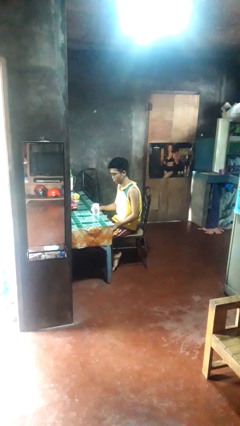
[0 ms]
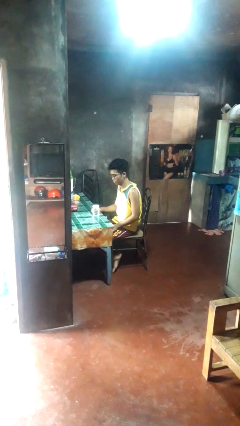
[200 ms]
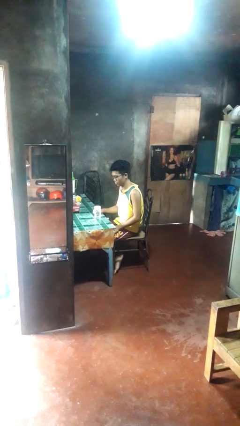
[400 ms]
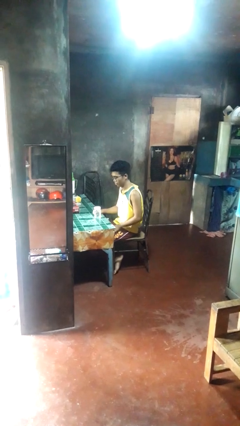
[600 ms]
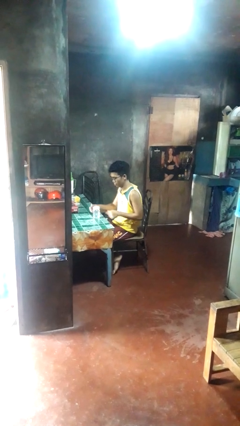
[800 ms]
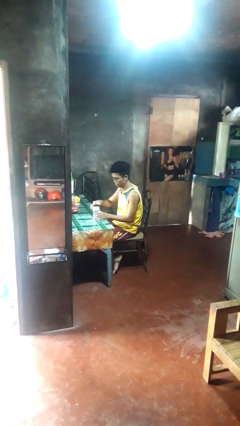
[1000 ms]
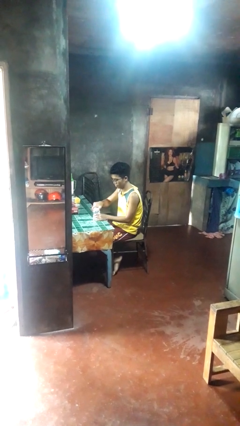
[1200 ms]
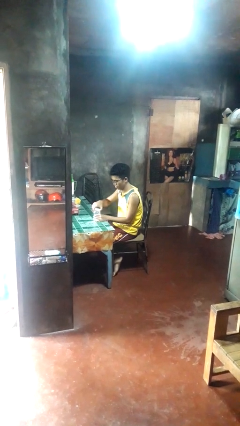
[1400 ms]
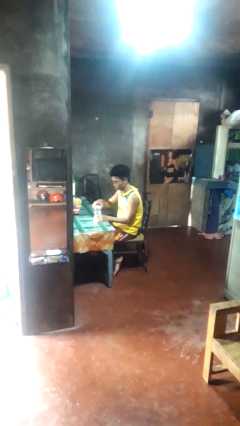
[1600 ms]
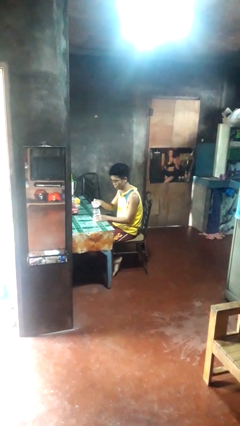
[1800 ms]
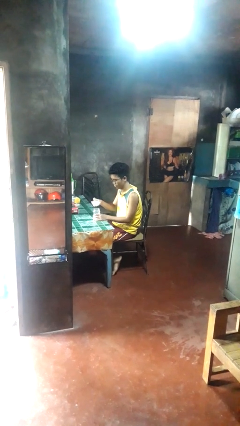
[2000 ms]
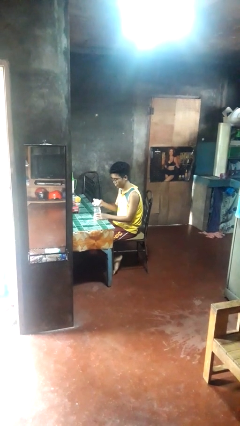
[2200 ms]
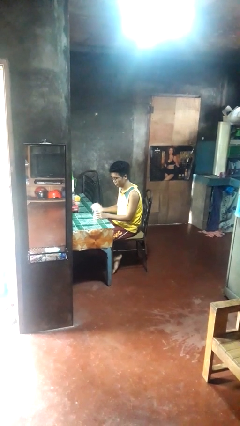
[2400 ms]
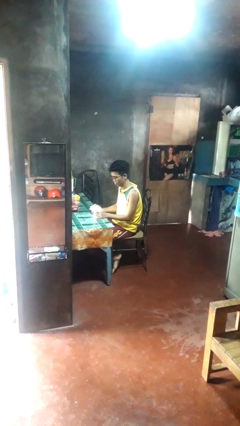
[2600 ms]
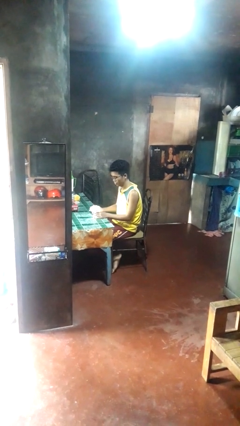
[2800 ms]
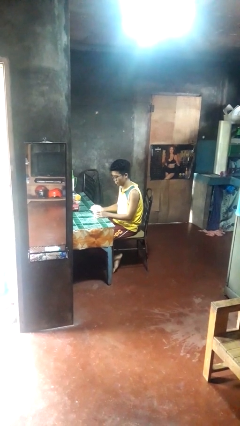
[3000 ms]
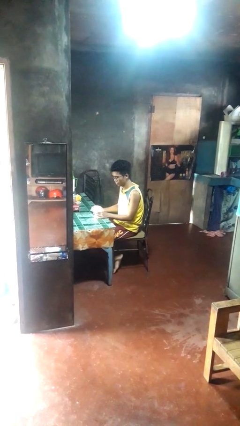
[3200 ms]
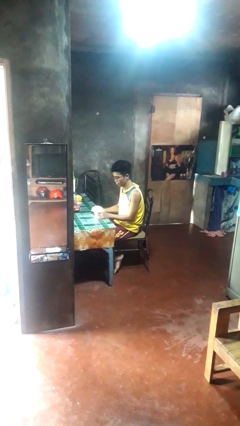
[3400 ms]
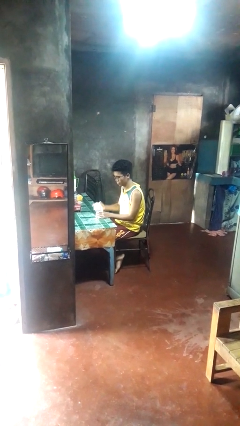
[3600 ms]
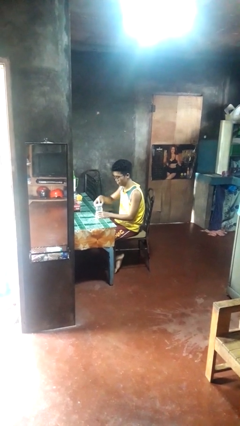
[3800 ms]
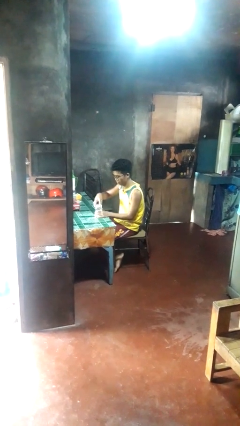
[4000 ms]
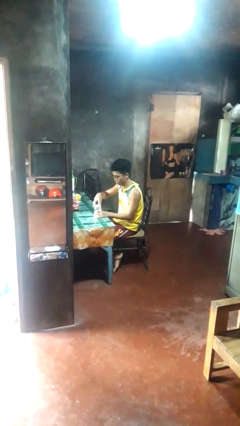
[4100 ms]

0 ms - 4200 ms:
person opens jar

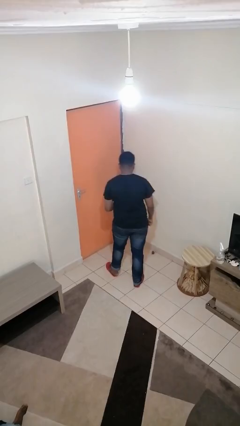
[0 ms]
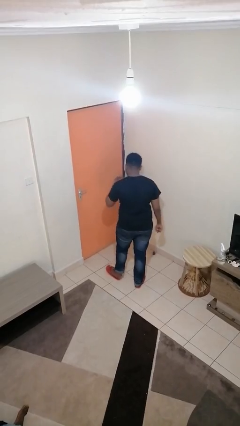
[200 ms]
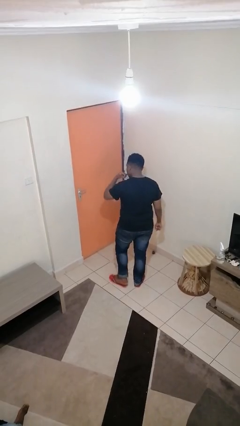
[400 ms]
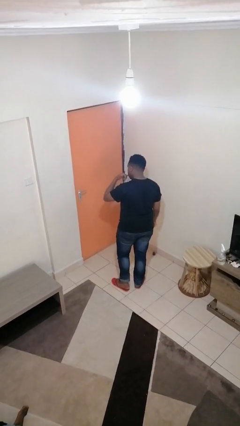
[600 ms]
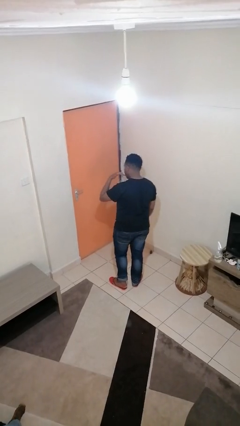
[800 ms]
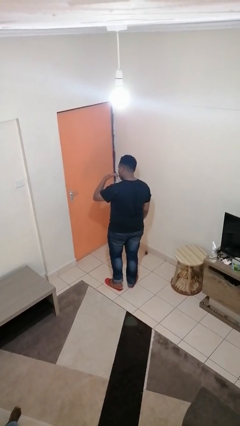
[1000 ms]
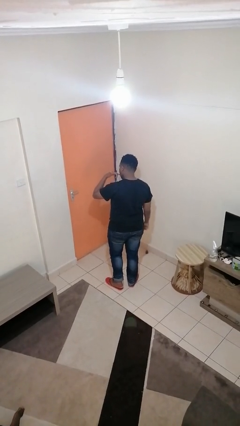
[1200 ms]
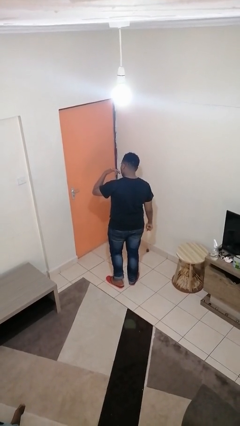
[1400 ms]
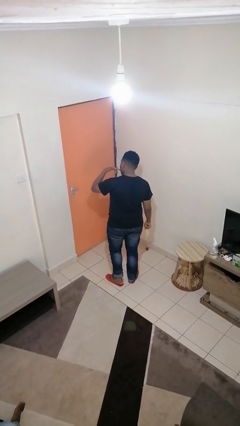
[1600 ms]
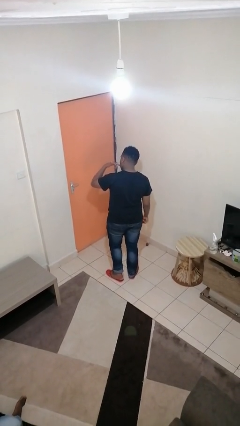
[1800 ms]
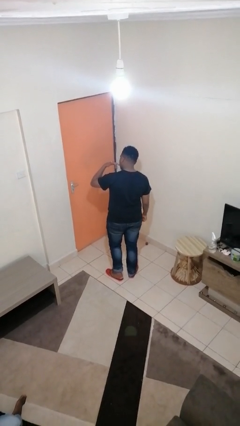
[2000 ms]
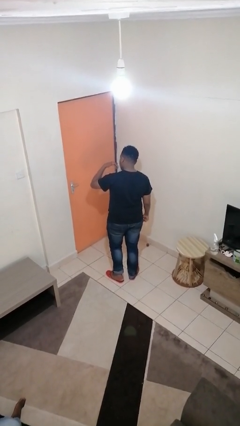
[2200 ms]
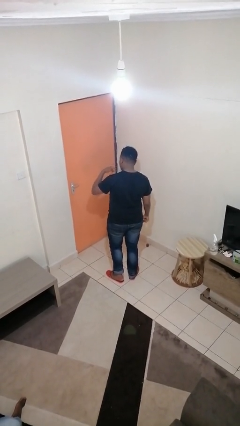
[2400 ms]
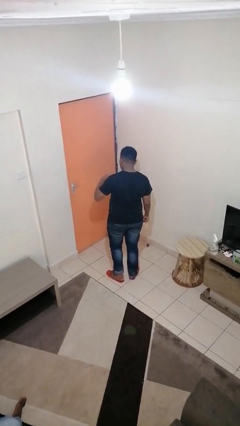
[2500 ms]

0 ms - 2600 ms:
person licks fingers

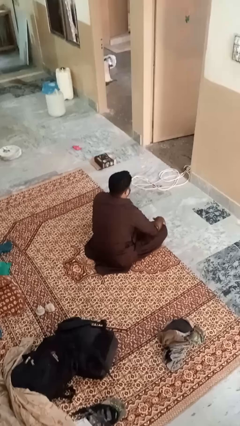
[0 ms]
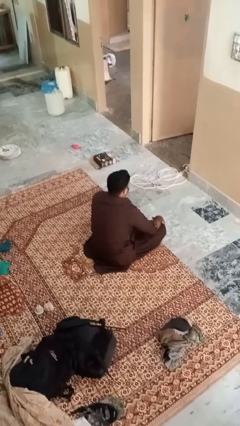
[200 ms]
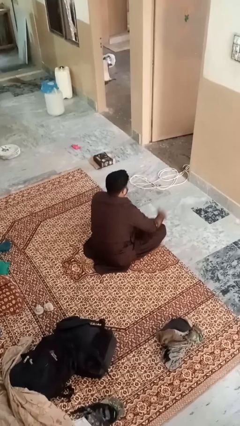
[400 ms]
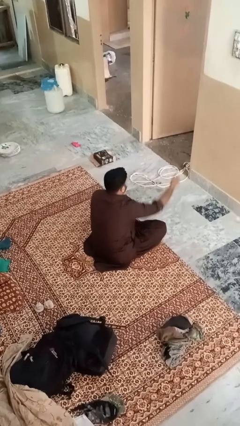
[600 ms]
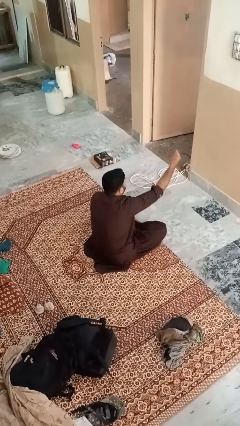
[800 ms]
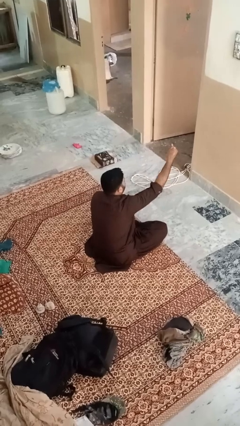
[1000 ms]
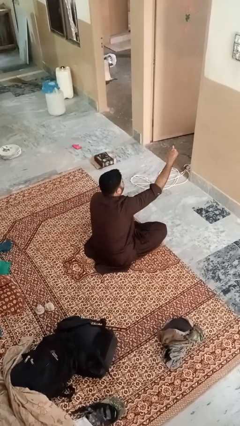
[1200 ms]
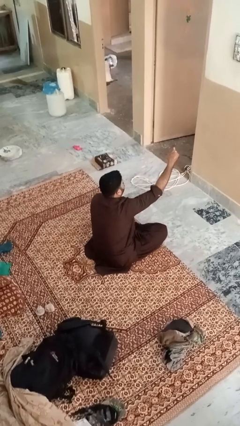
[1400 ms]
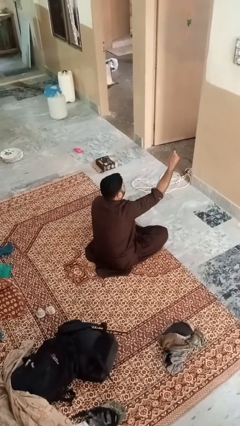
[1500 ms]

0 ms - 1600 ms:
person gestures hang loose

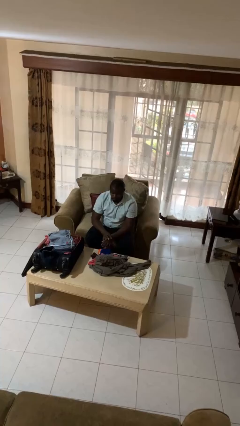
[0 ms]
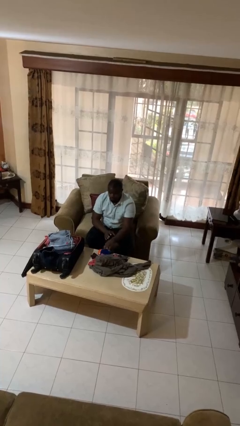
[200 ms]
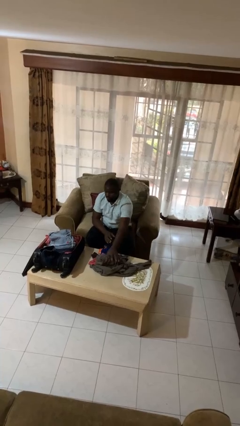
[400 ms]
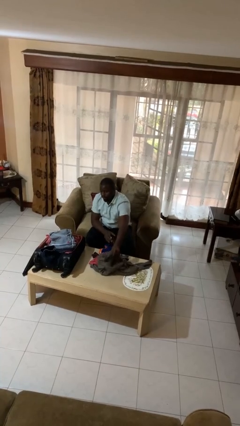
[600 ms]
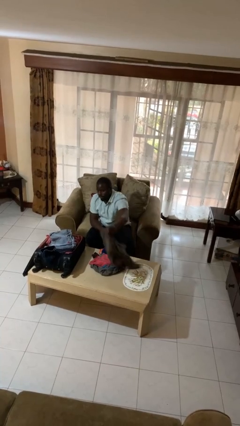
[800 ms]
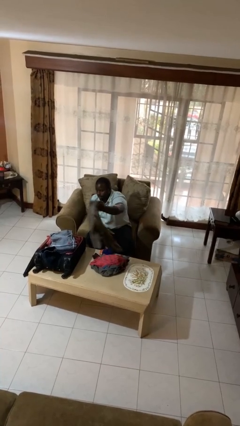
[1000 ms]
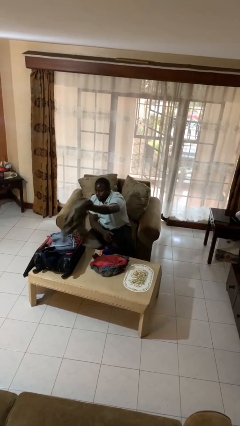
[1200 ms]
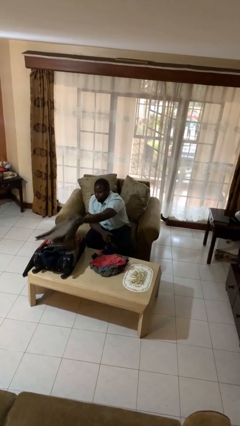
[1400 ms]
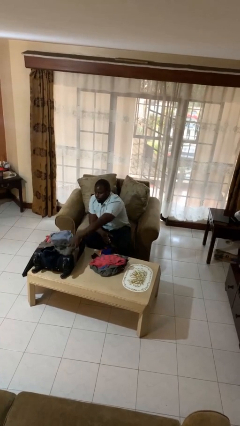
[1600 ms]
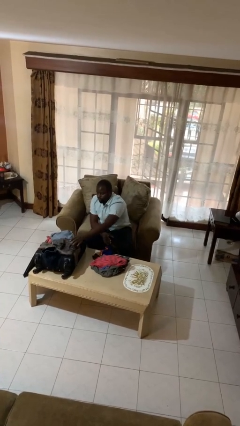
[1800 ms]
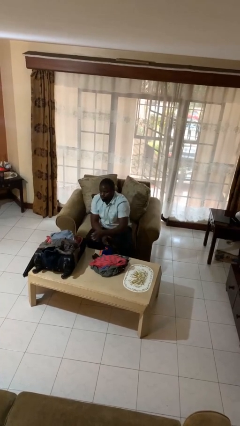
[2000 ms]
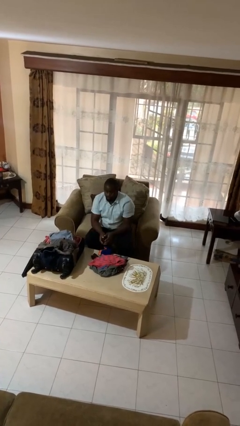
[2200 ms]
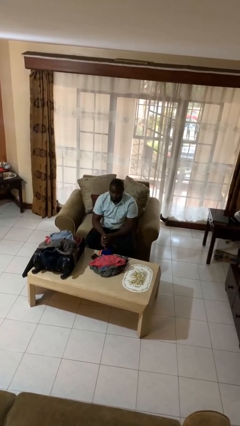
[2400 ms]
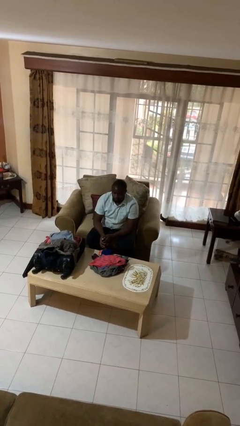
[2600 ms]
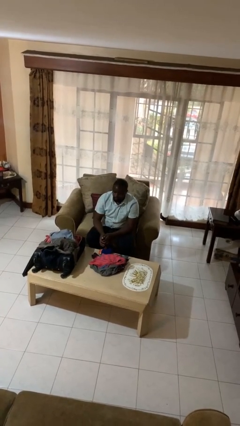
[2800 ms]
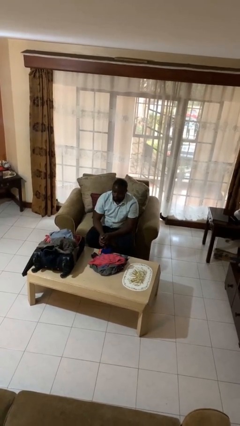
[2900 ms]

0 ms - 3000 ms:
person loads clothes into suitcase

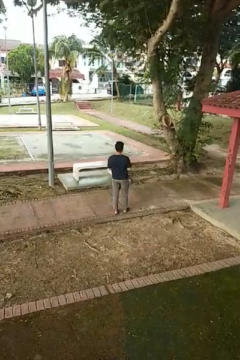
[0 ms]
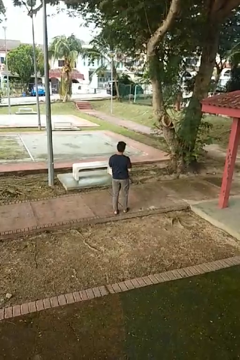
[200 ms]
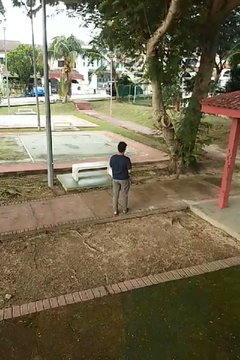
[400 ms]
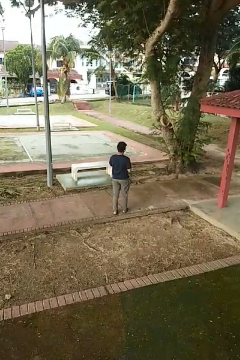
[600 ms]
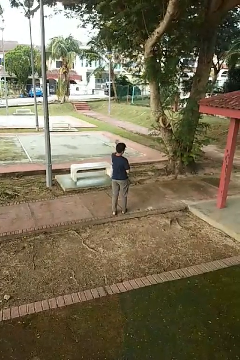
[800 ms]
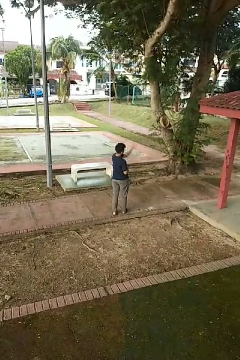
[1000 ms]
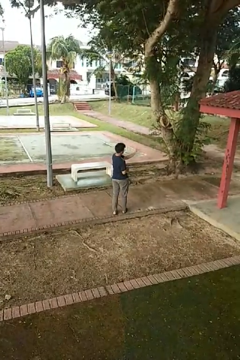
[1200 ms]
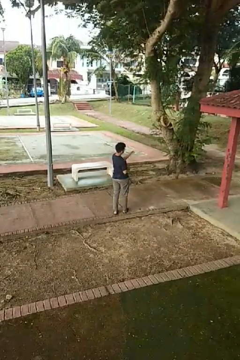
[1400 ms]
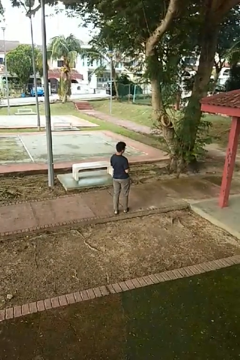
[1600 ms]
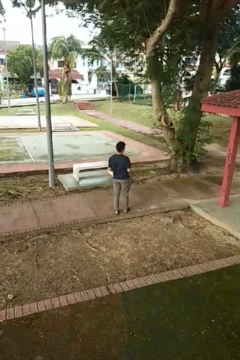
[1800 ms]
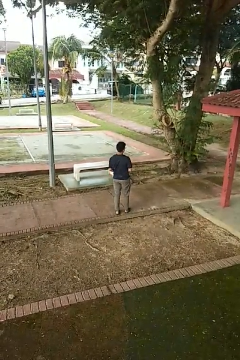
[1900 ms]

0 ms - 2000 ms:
person karate chop

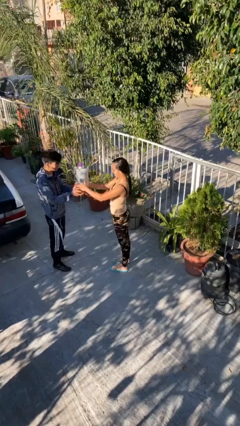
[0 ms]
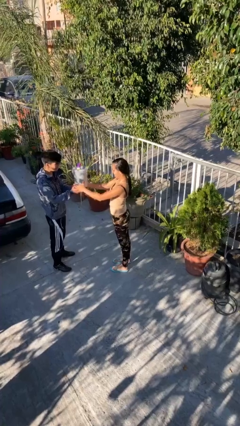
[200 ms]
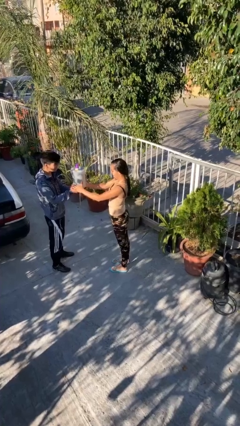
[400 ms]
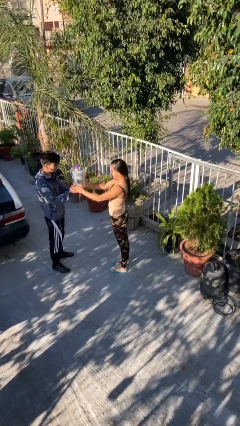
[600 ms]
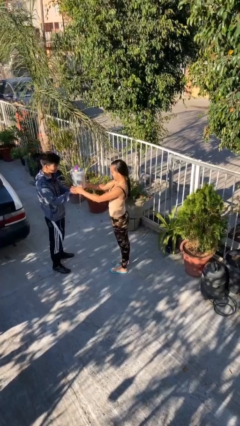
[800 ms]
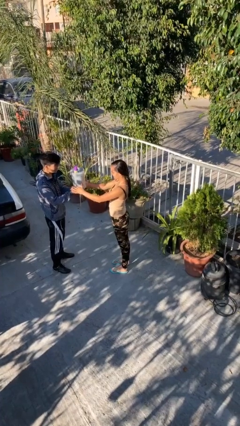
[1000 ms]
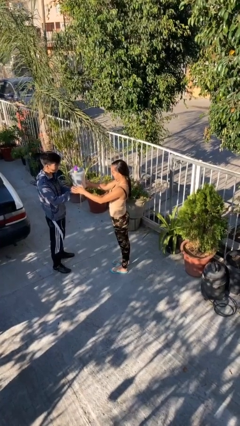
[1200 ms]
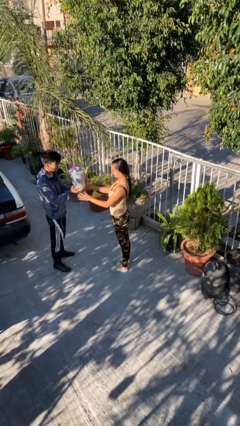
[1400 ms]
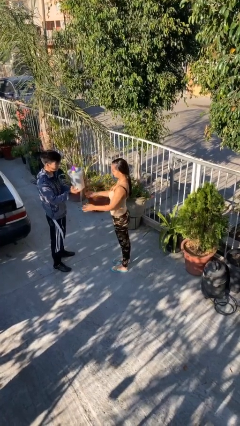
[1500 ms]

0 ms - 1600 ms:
person transfers object to person

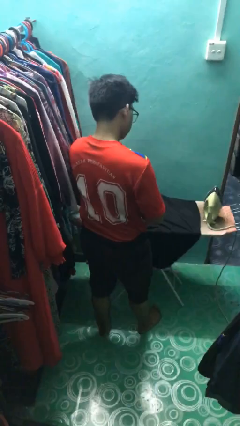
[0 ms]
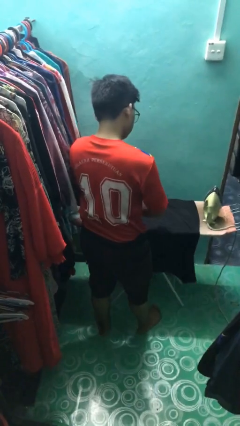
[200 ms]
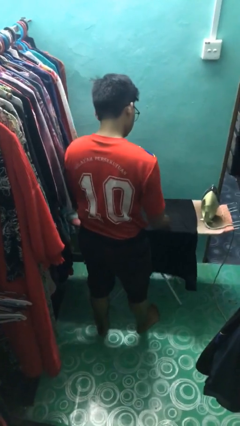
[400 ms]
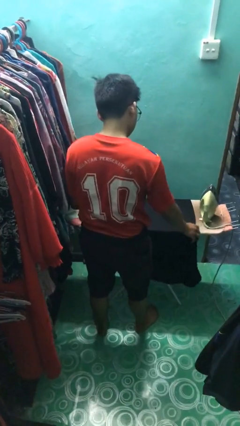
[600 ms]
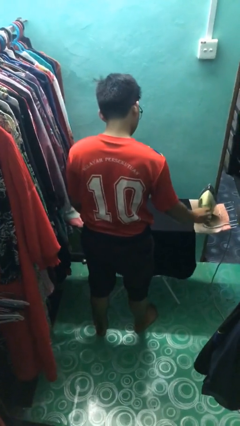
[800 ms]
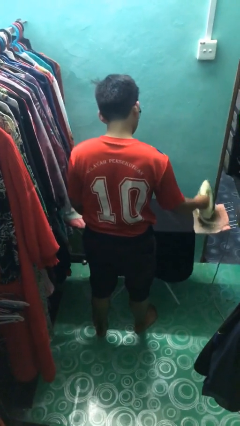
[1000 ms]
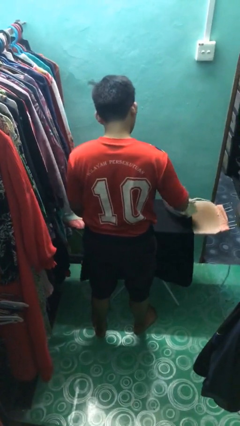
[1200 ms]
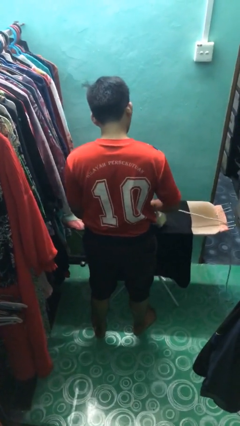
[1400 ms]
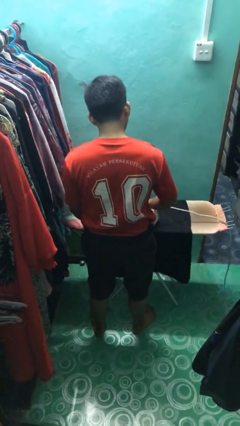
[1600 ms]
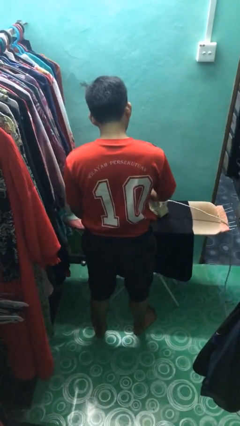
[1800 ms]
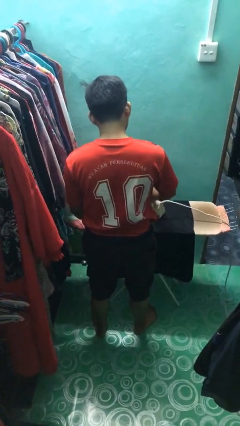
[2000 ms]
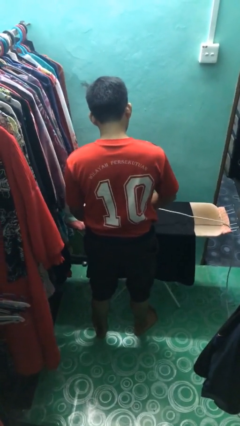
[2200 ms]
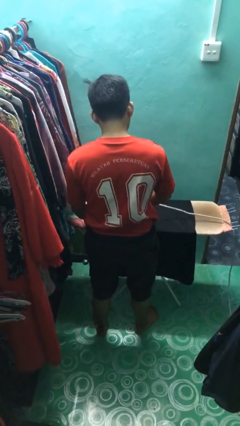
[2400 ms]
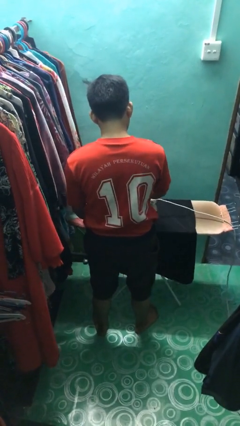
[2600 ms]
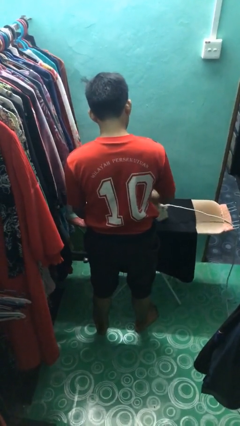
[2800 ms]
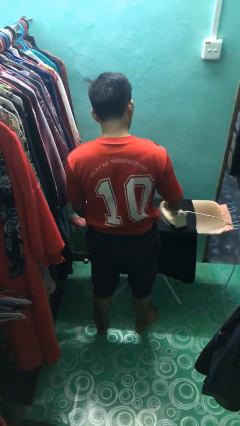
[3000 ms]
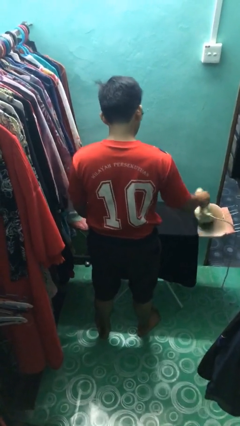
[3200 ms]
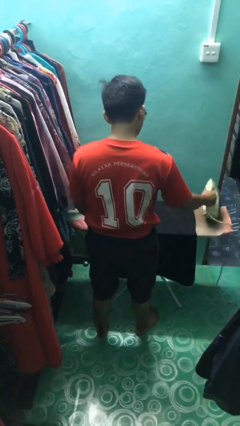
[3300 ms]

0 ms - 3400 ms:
person irons clothes
